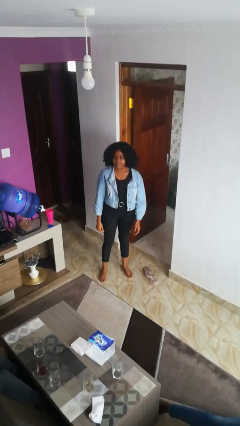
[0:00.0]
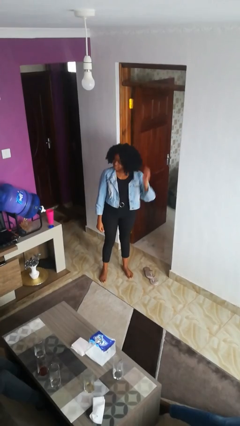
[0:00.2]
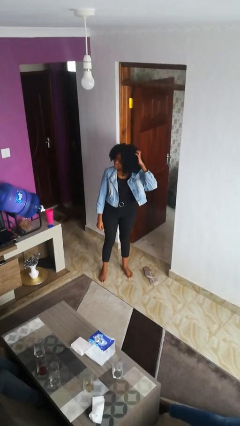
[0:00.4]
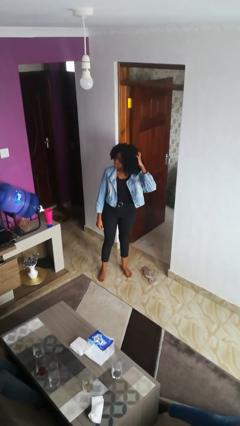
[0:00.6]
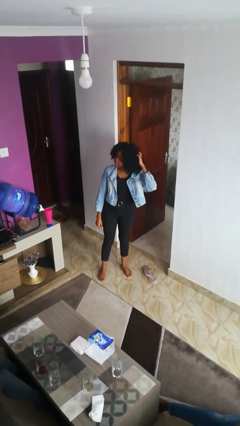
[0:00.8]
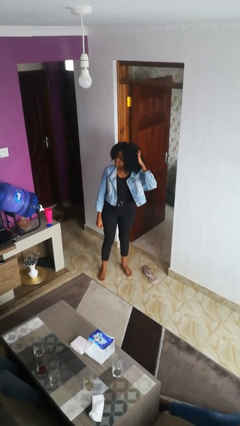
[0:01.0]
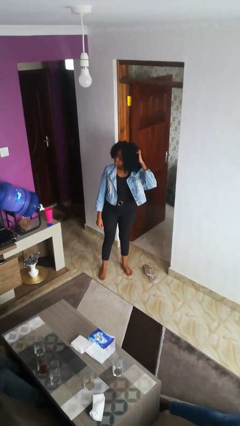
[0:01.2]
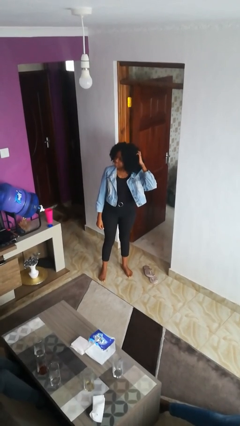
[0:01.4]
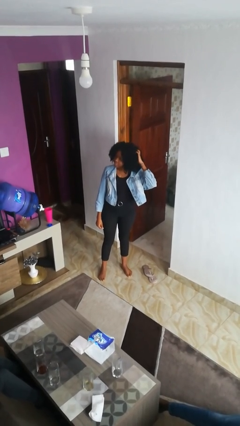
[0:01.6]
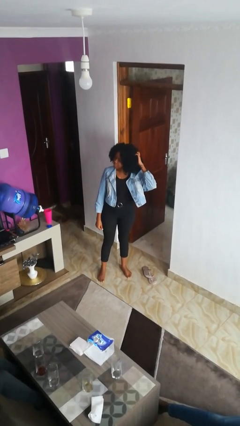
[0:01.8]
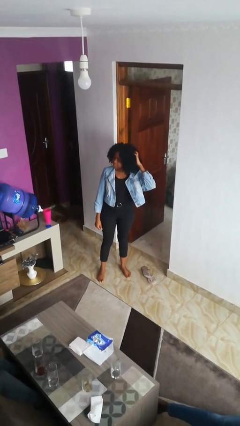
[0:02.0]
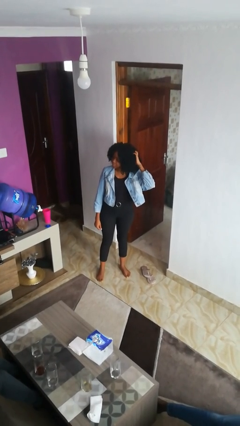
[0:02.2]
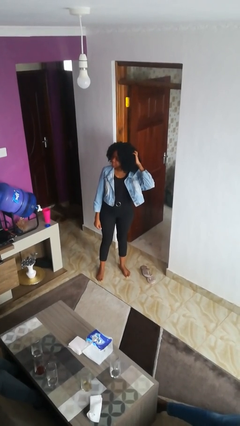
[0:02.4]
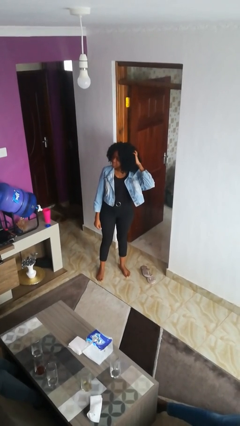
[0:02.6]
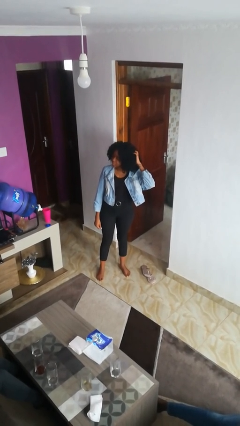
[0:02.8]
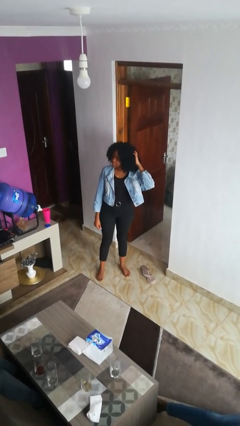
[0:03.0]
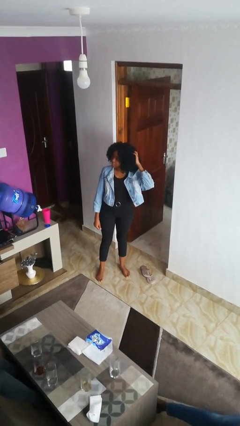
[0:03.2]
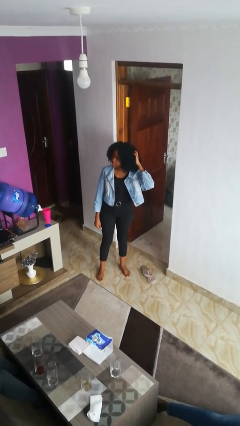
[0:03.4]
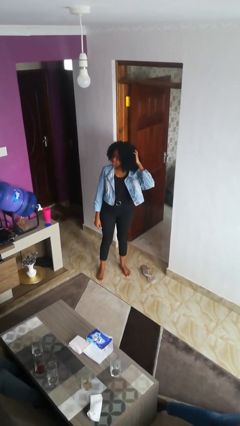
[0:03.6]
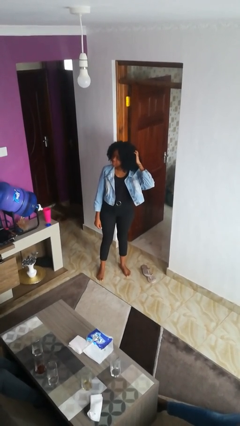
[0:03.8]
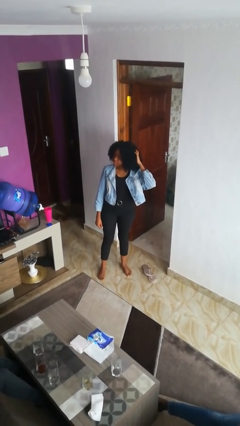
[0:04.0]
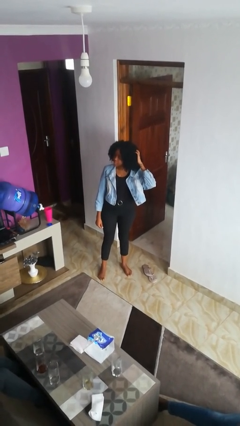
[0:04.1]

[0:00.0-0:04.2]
person scratches face

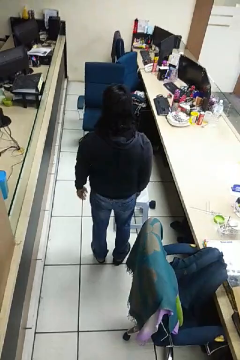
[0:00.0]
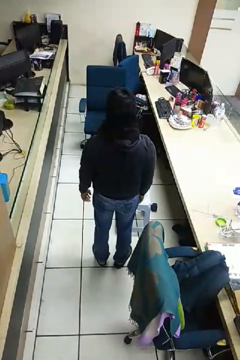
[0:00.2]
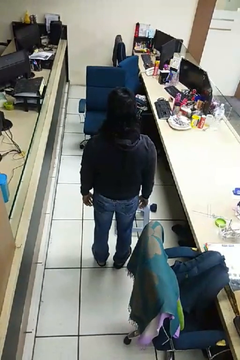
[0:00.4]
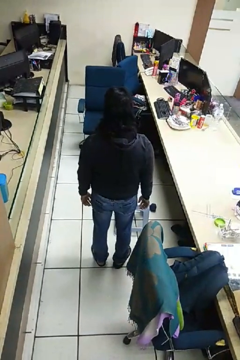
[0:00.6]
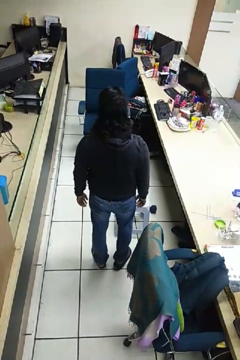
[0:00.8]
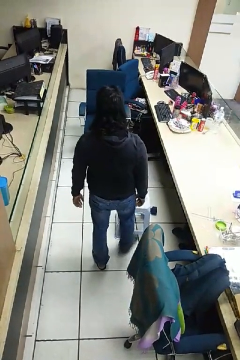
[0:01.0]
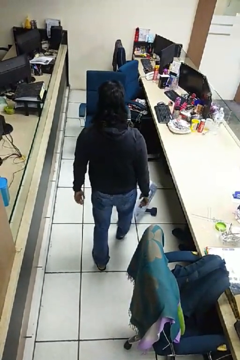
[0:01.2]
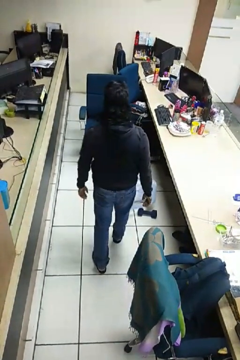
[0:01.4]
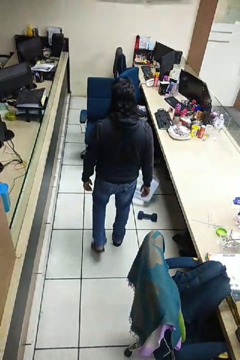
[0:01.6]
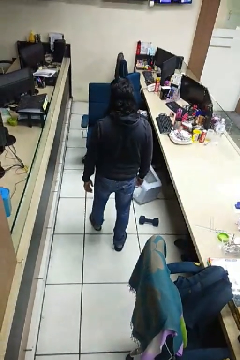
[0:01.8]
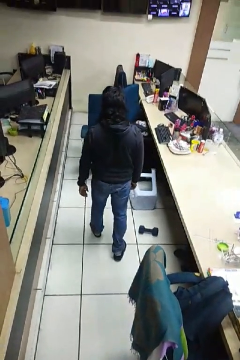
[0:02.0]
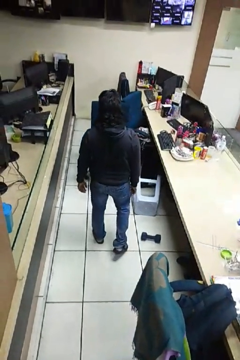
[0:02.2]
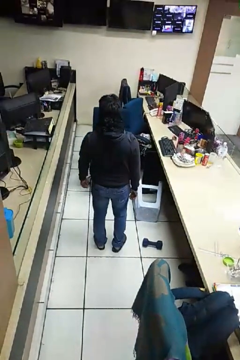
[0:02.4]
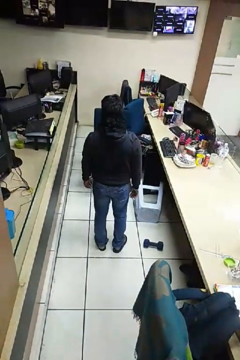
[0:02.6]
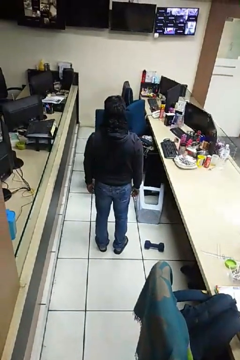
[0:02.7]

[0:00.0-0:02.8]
person knocks over furniture

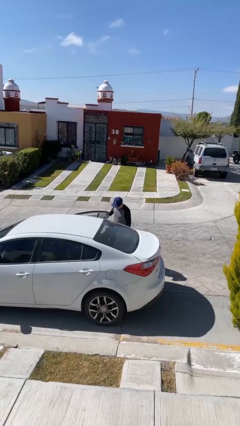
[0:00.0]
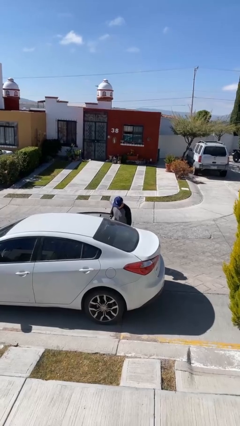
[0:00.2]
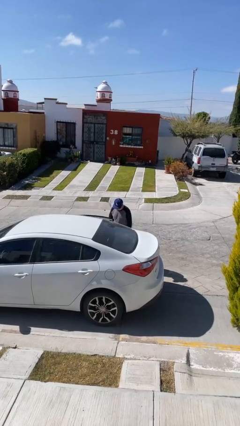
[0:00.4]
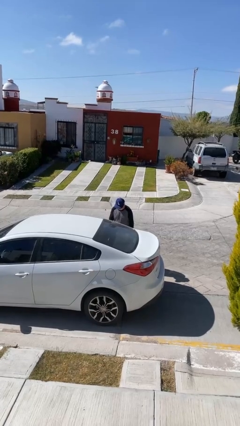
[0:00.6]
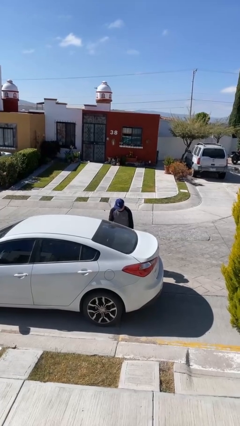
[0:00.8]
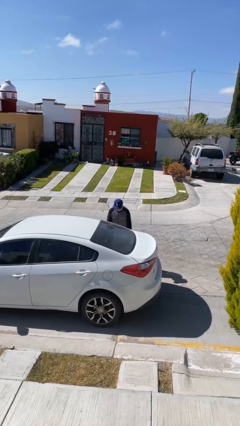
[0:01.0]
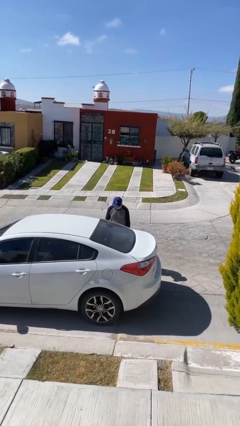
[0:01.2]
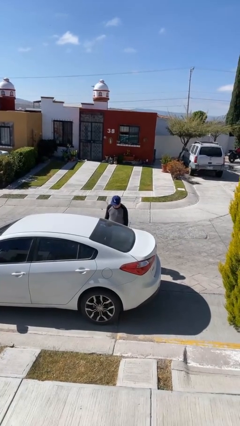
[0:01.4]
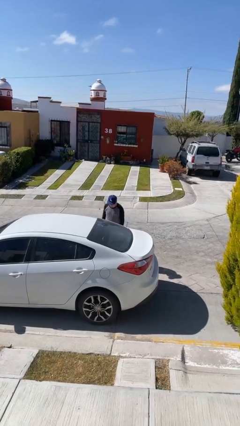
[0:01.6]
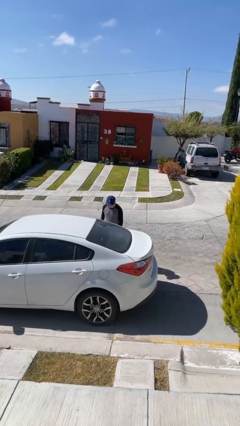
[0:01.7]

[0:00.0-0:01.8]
person closes car door

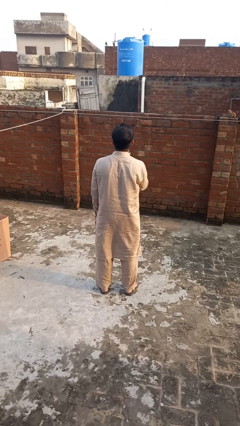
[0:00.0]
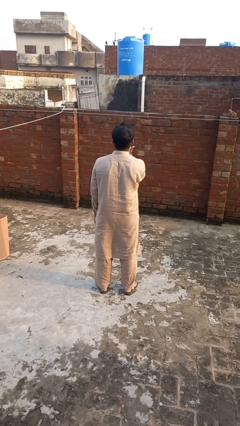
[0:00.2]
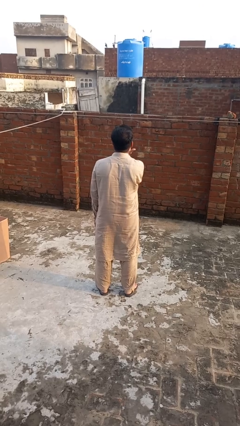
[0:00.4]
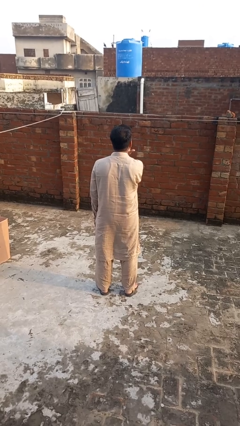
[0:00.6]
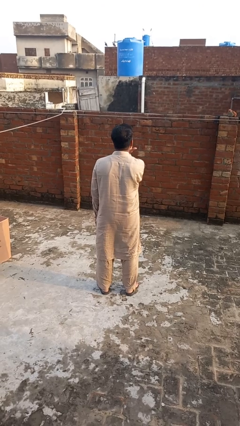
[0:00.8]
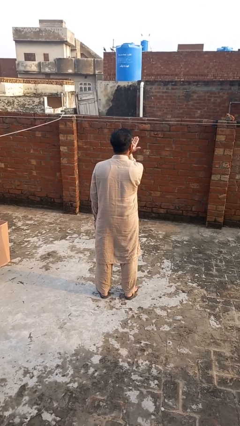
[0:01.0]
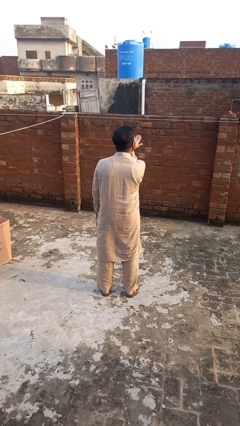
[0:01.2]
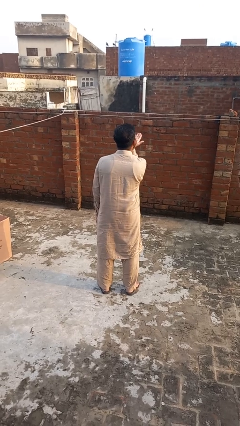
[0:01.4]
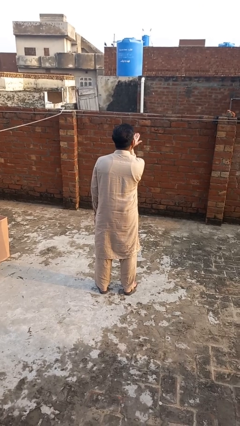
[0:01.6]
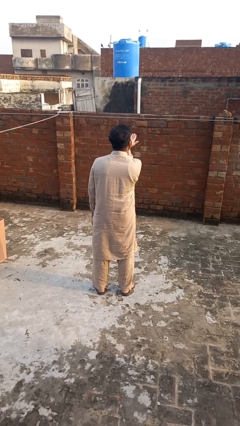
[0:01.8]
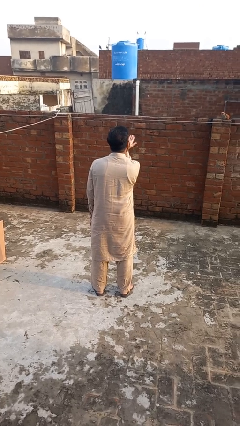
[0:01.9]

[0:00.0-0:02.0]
person gestures blow kiss

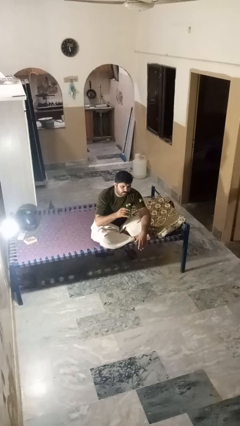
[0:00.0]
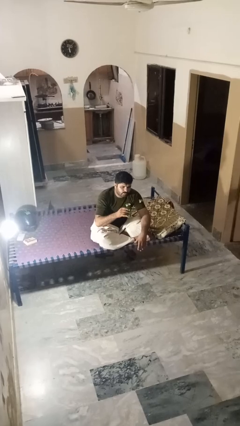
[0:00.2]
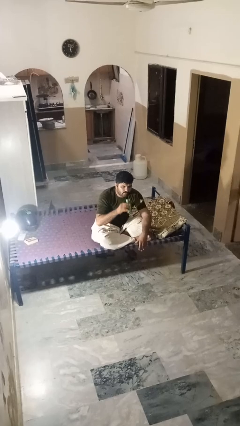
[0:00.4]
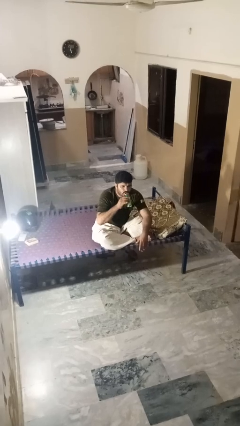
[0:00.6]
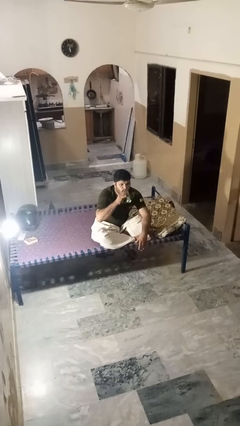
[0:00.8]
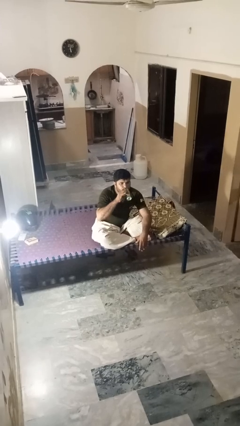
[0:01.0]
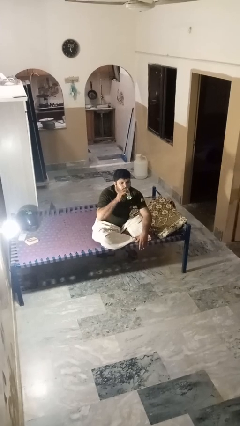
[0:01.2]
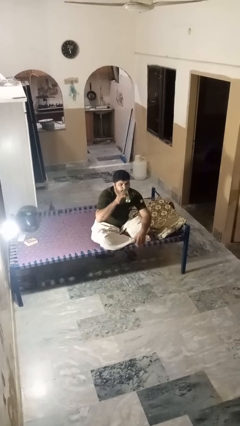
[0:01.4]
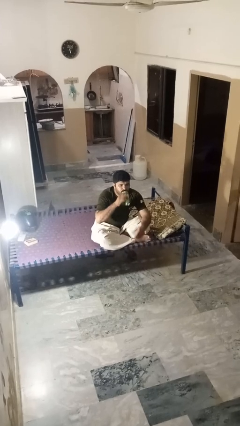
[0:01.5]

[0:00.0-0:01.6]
person drinks from beverage can

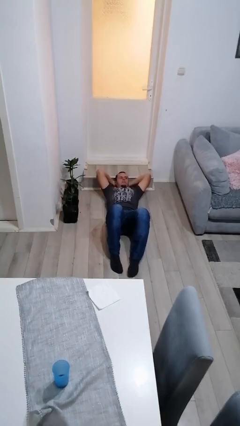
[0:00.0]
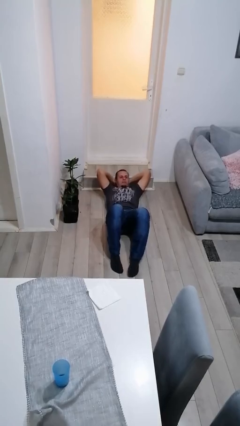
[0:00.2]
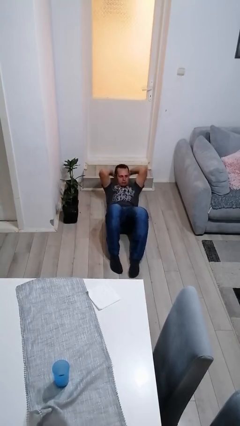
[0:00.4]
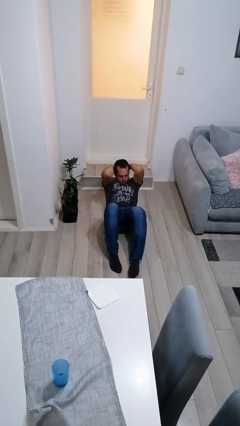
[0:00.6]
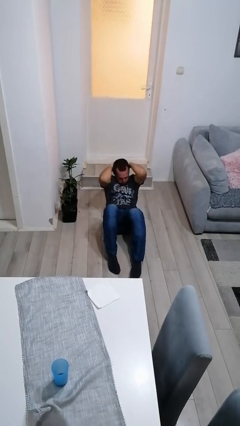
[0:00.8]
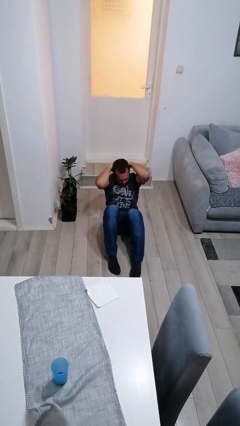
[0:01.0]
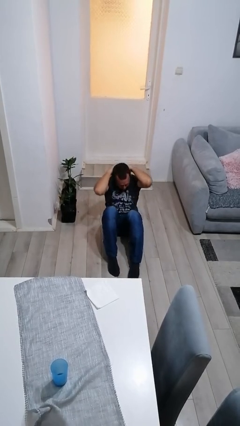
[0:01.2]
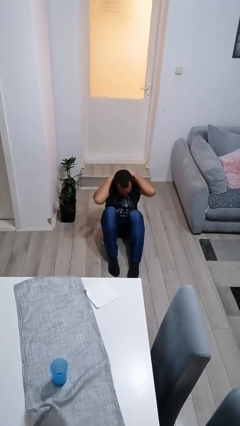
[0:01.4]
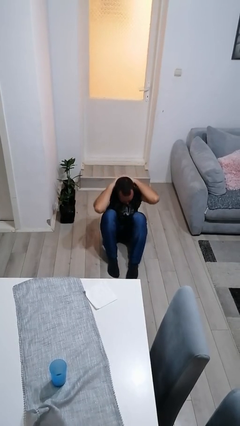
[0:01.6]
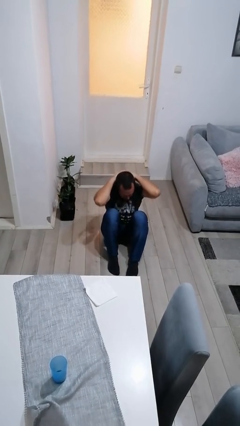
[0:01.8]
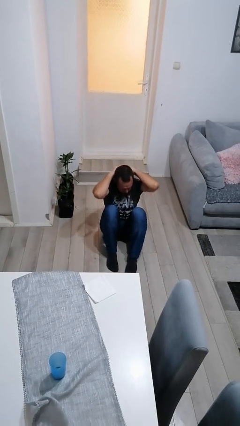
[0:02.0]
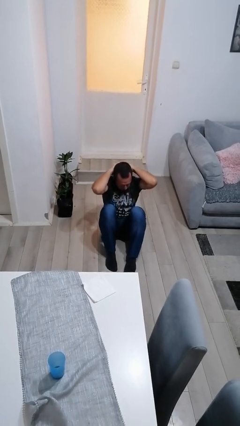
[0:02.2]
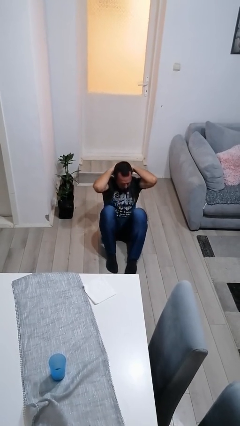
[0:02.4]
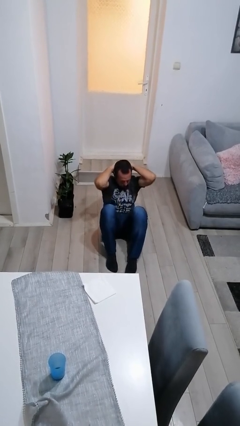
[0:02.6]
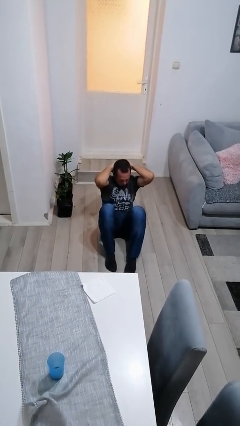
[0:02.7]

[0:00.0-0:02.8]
person exercises with situp

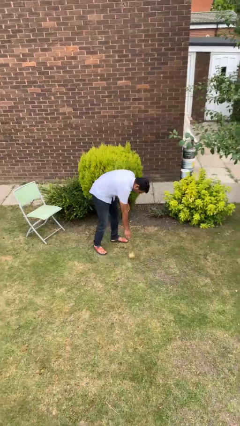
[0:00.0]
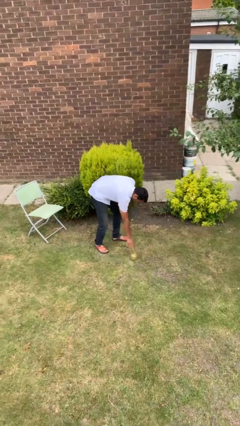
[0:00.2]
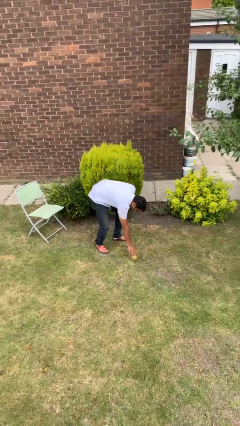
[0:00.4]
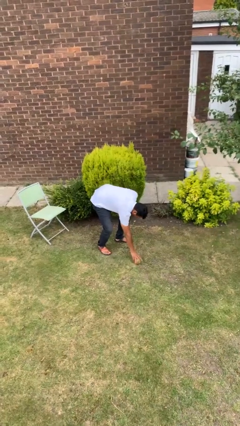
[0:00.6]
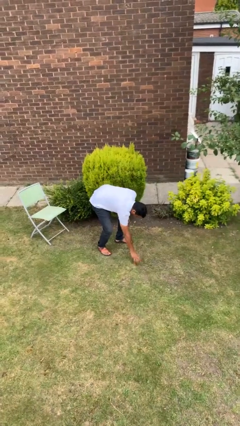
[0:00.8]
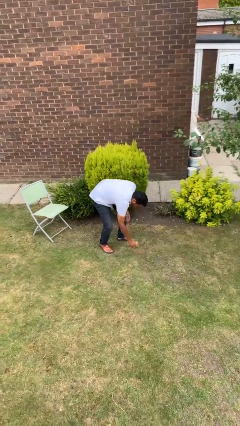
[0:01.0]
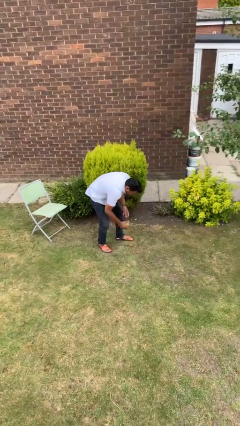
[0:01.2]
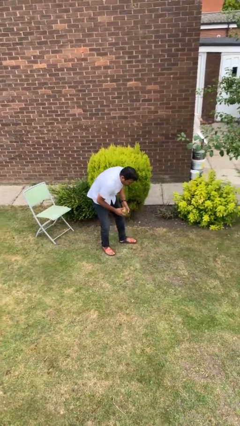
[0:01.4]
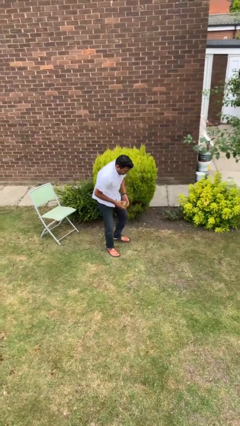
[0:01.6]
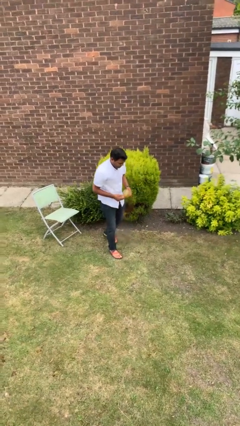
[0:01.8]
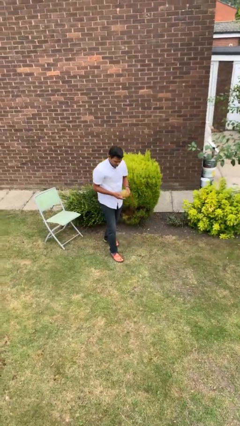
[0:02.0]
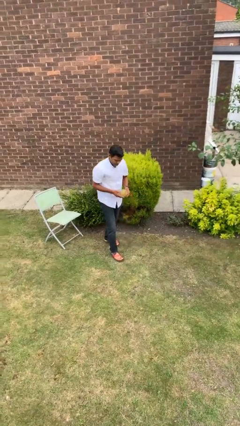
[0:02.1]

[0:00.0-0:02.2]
person picks up object from floor
